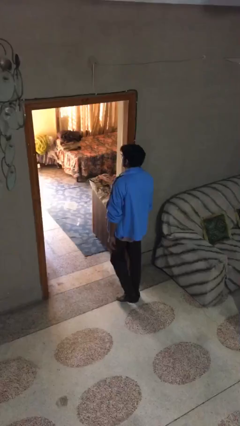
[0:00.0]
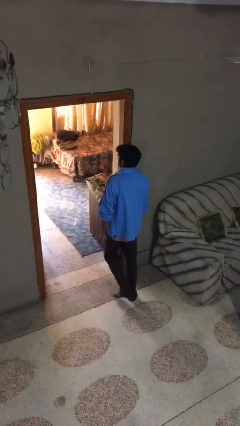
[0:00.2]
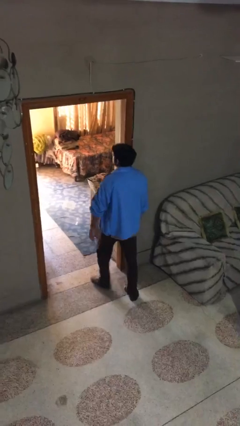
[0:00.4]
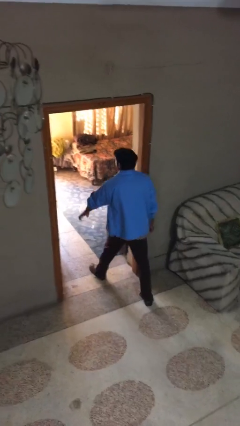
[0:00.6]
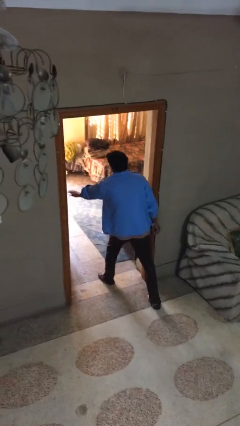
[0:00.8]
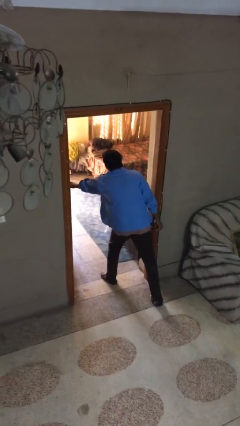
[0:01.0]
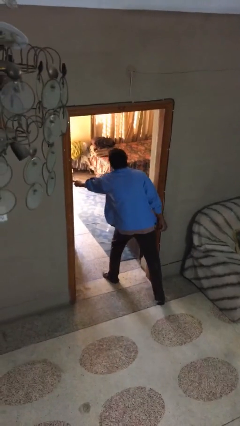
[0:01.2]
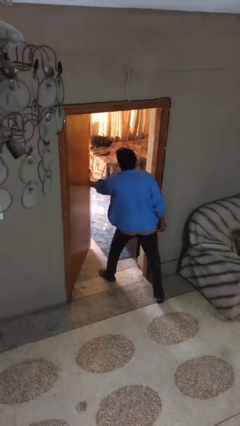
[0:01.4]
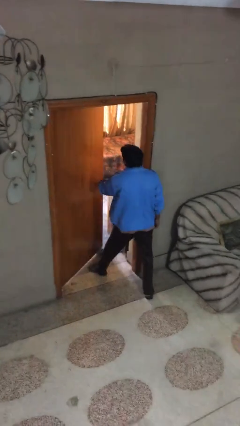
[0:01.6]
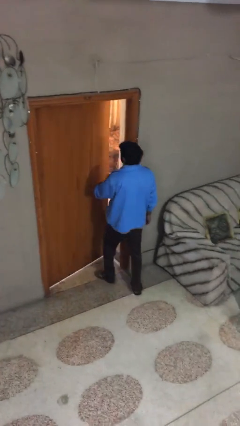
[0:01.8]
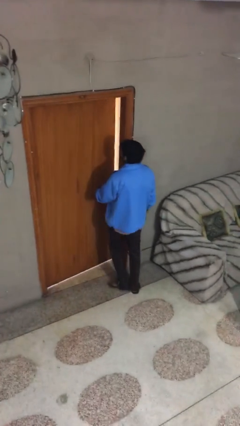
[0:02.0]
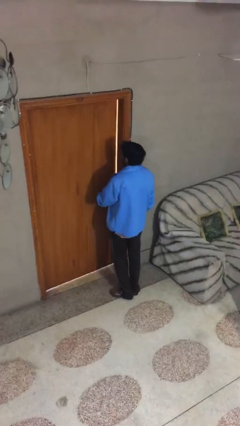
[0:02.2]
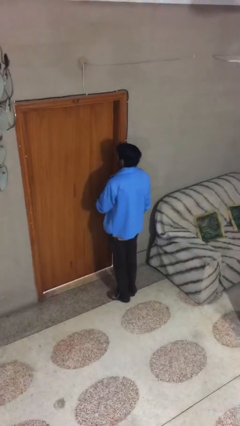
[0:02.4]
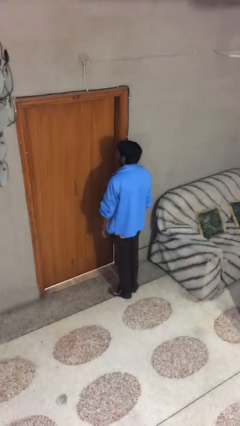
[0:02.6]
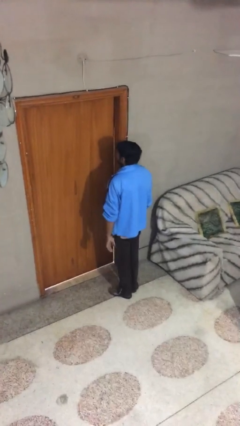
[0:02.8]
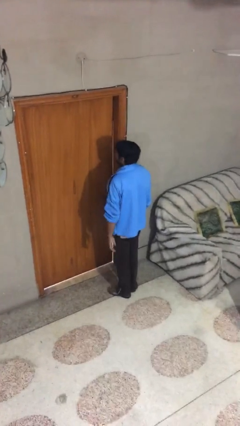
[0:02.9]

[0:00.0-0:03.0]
person closes facility door

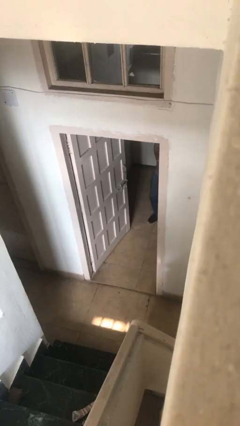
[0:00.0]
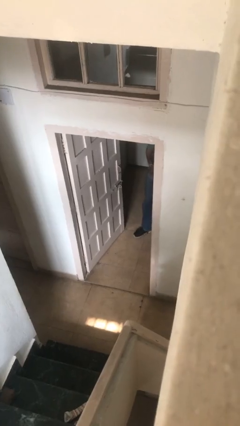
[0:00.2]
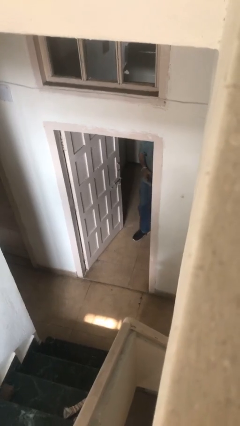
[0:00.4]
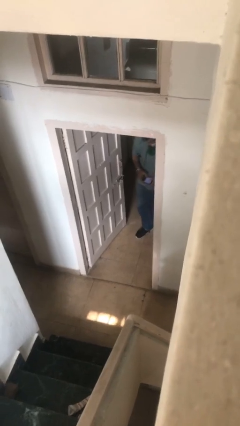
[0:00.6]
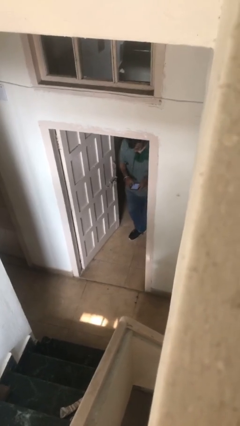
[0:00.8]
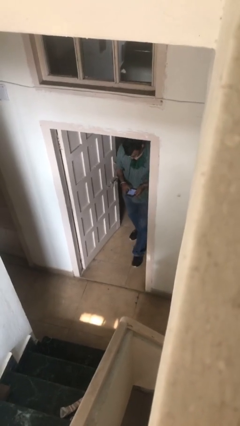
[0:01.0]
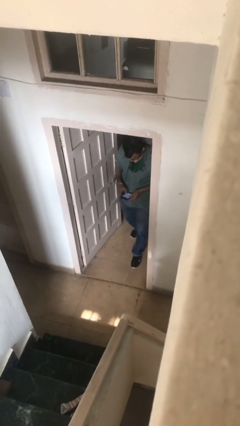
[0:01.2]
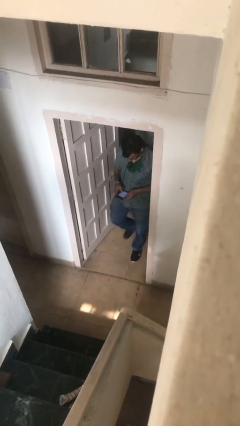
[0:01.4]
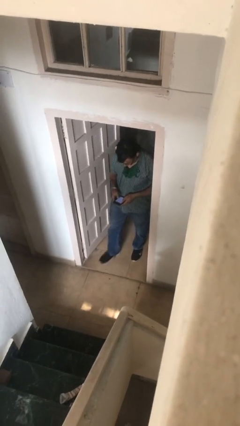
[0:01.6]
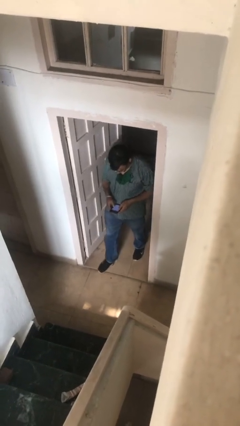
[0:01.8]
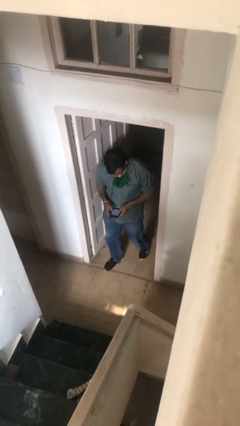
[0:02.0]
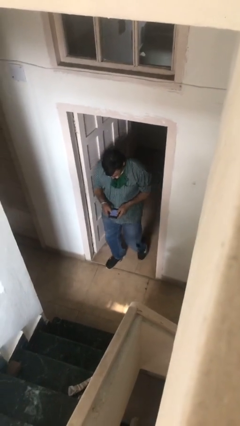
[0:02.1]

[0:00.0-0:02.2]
person enters scene through structure

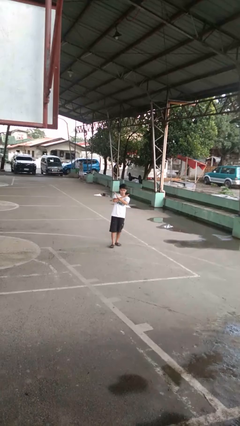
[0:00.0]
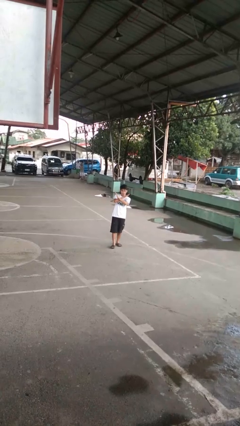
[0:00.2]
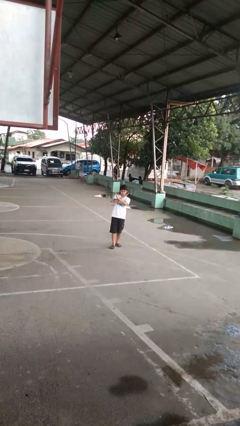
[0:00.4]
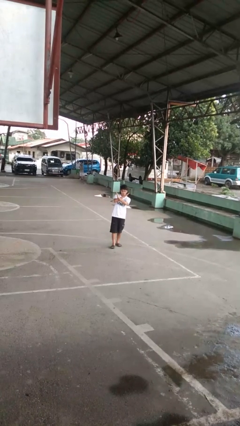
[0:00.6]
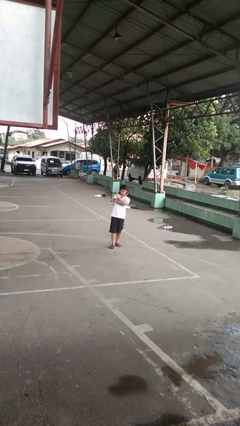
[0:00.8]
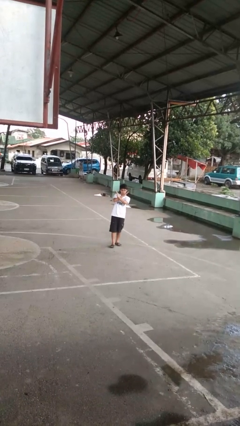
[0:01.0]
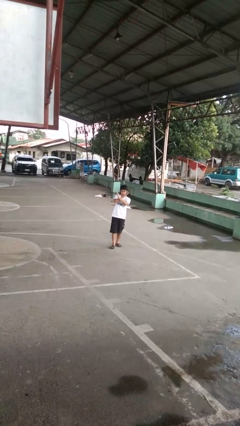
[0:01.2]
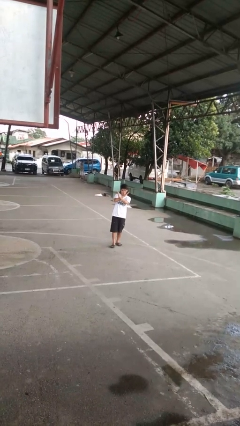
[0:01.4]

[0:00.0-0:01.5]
person gestures arms x

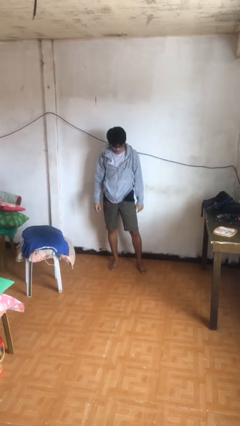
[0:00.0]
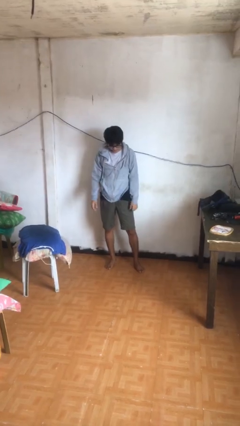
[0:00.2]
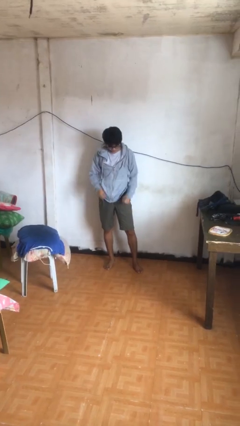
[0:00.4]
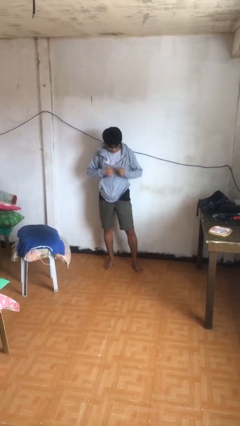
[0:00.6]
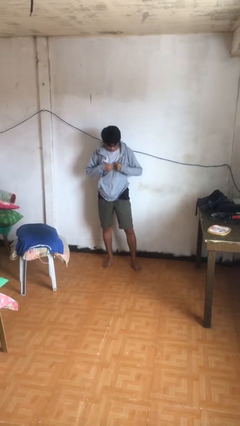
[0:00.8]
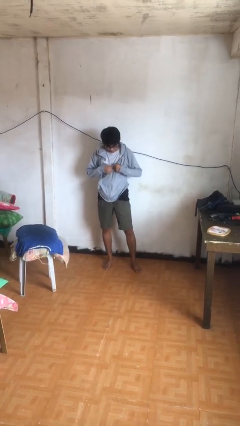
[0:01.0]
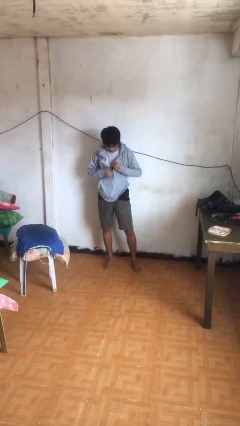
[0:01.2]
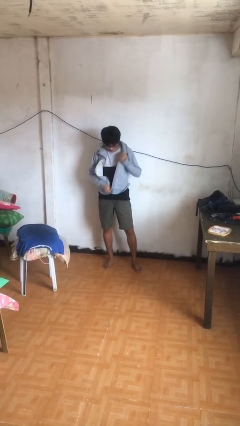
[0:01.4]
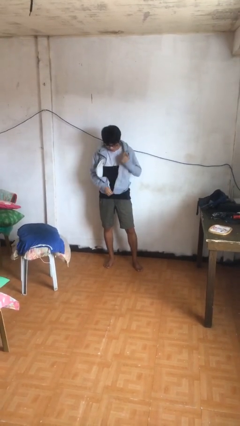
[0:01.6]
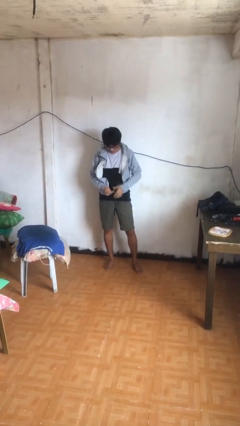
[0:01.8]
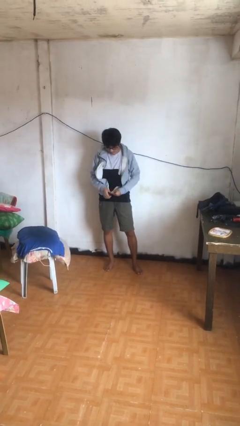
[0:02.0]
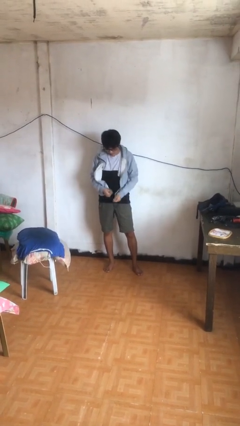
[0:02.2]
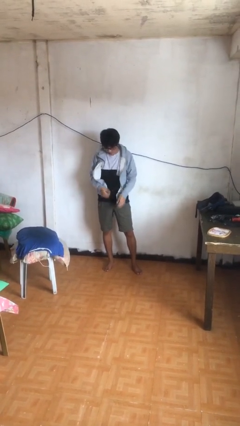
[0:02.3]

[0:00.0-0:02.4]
person unzips jacket

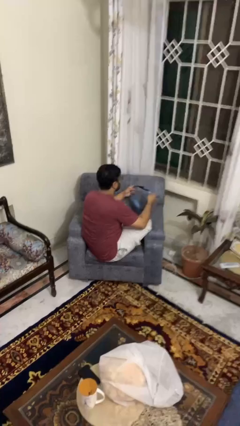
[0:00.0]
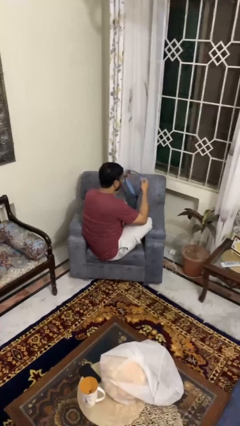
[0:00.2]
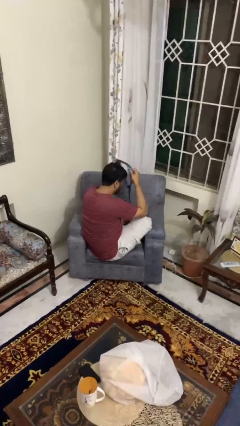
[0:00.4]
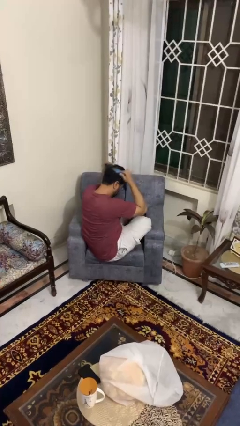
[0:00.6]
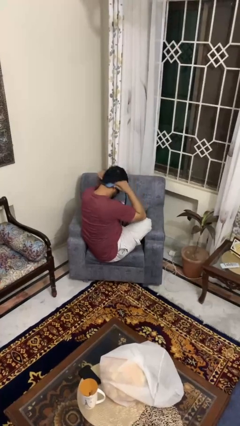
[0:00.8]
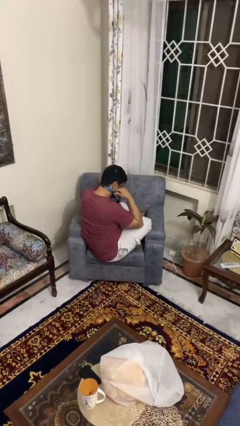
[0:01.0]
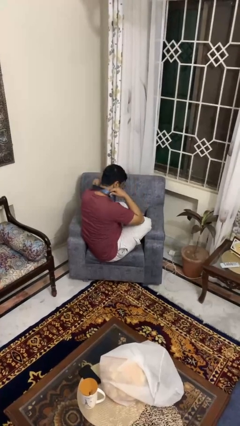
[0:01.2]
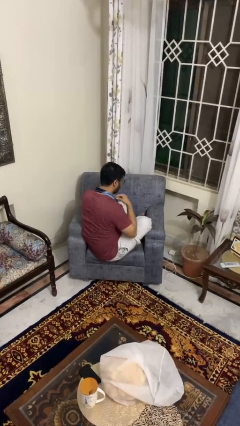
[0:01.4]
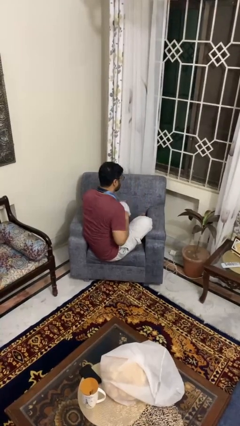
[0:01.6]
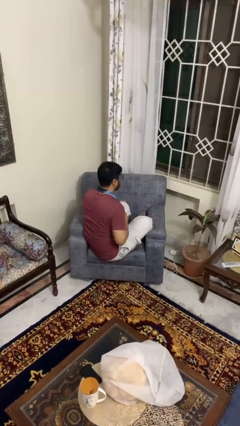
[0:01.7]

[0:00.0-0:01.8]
person puts on necktie

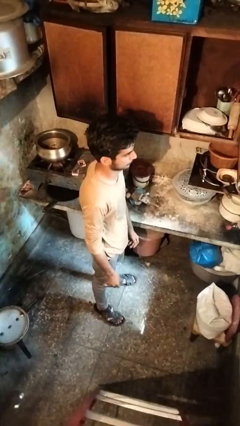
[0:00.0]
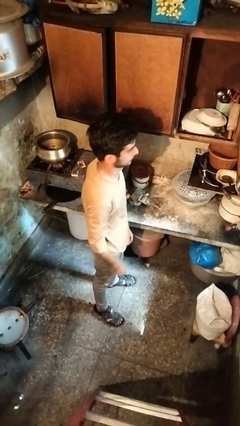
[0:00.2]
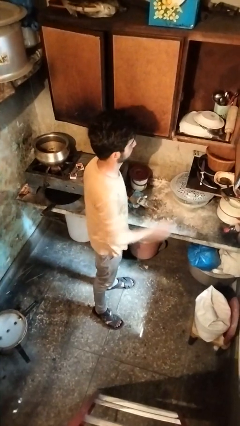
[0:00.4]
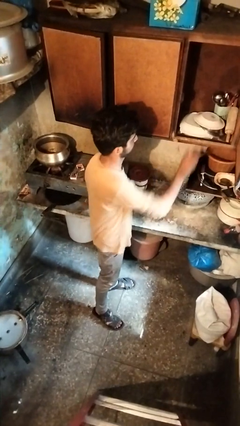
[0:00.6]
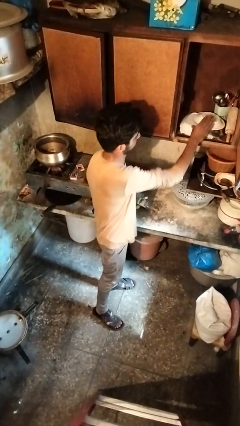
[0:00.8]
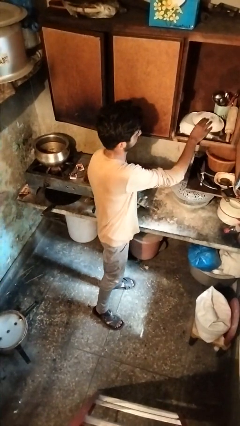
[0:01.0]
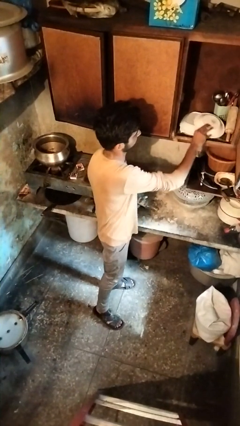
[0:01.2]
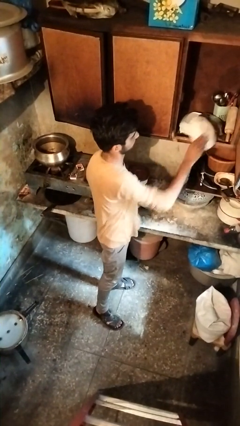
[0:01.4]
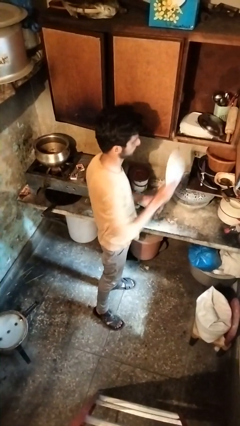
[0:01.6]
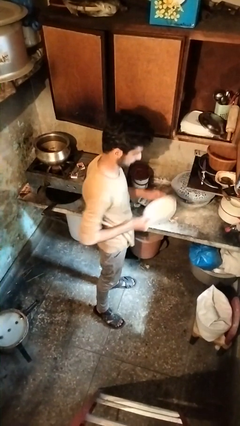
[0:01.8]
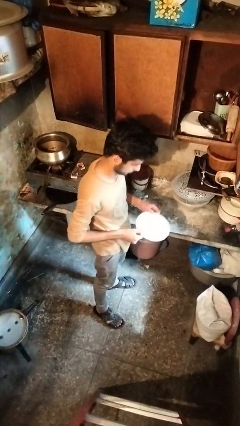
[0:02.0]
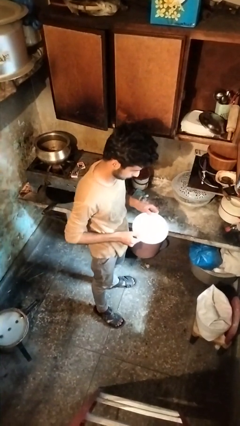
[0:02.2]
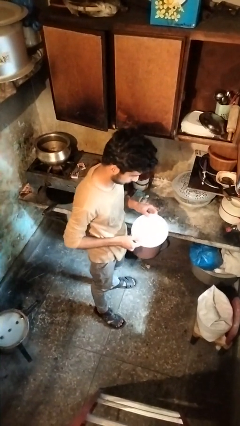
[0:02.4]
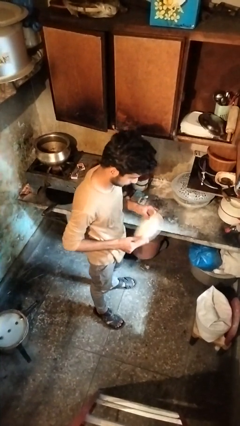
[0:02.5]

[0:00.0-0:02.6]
person picks up object from cabinet

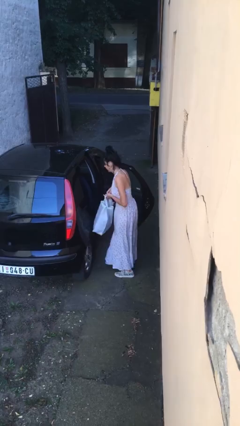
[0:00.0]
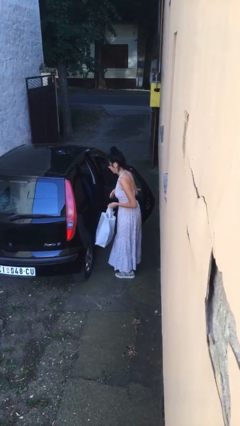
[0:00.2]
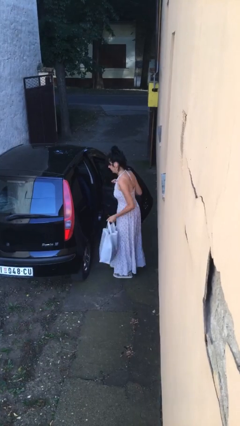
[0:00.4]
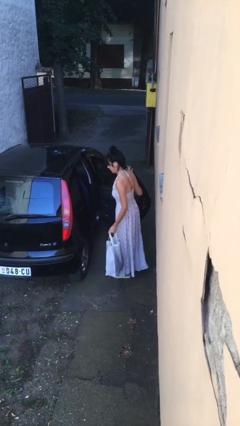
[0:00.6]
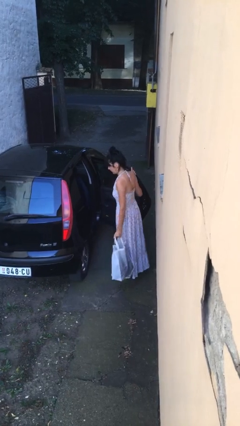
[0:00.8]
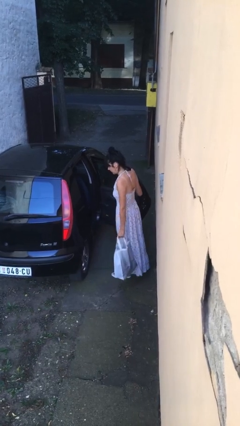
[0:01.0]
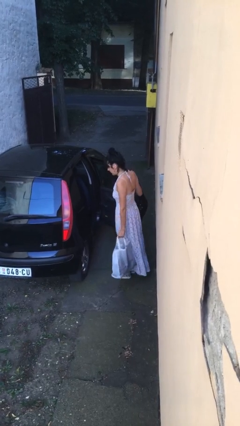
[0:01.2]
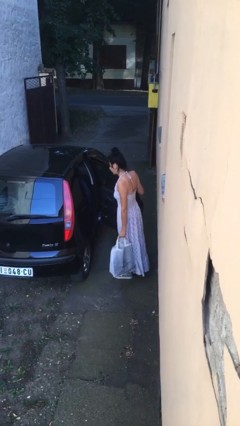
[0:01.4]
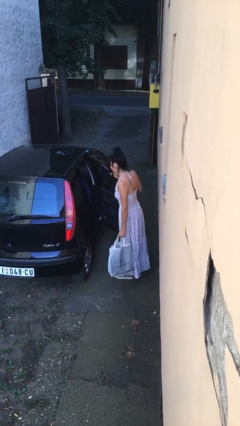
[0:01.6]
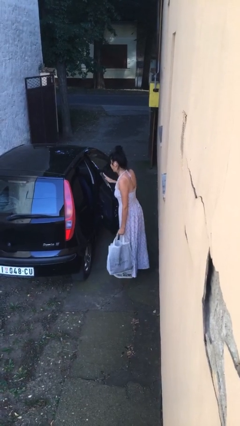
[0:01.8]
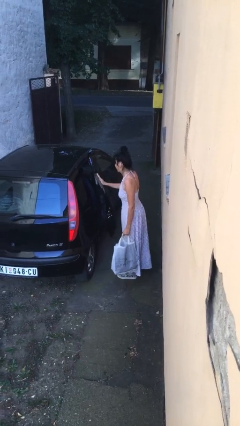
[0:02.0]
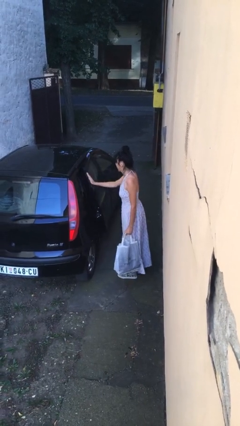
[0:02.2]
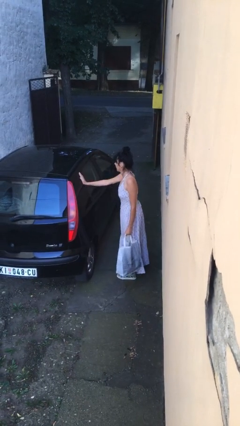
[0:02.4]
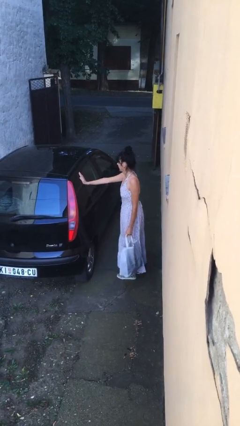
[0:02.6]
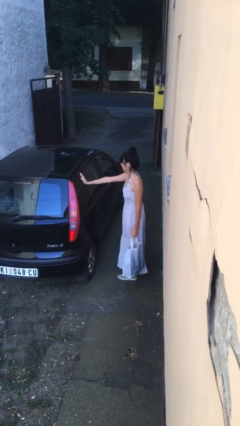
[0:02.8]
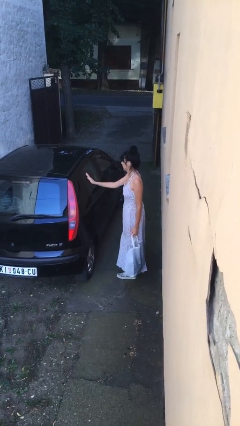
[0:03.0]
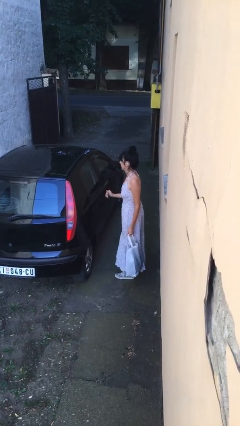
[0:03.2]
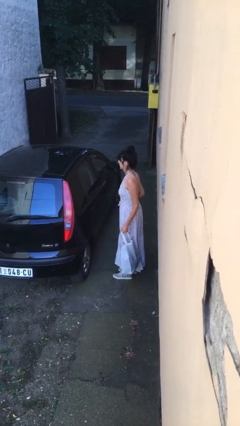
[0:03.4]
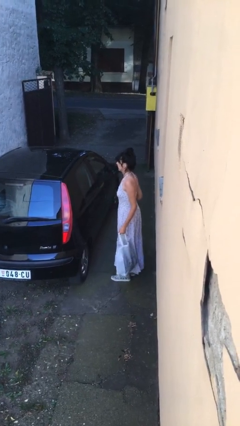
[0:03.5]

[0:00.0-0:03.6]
person closes car door
